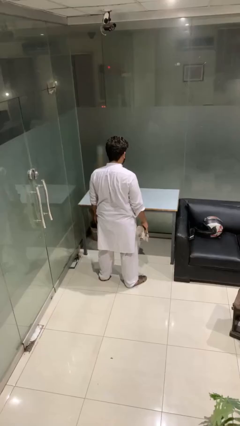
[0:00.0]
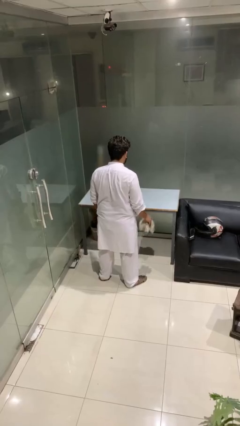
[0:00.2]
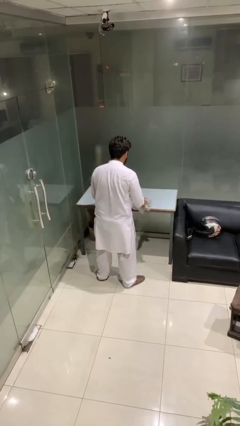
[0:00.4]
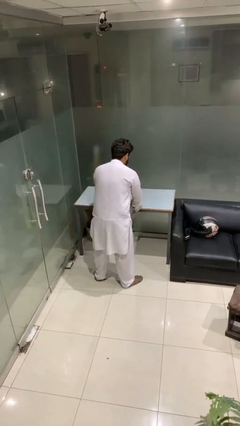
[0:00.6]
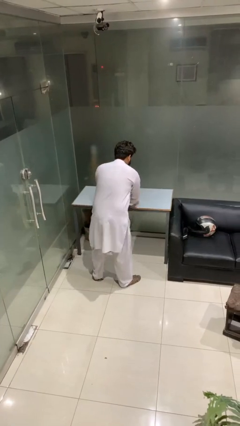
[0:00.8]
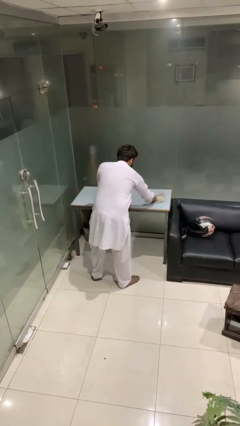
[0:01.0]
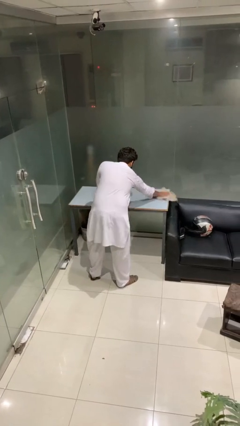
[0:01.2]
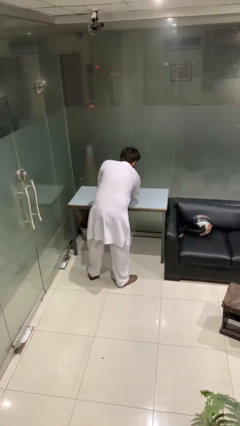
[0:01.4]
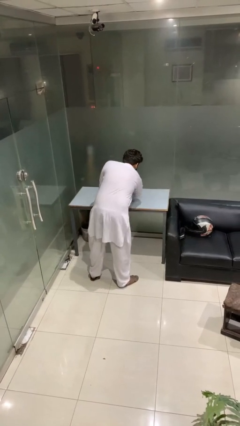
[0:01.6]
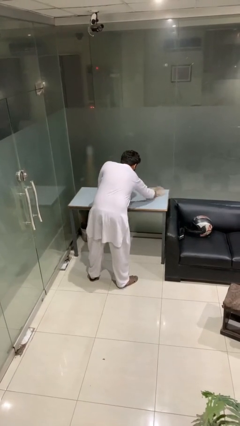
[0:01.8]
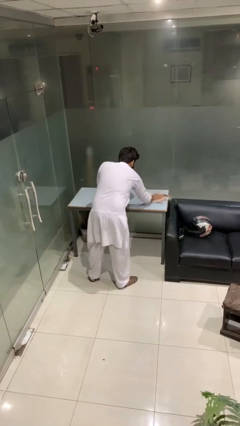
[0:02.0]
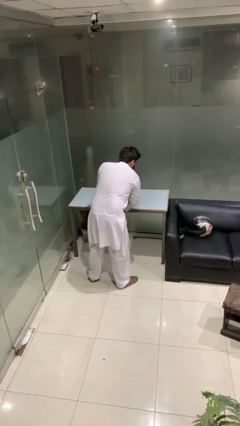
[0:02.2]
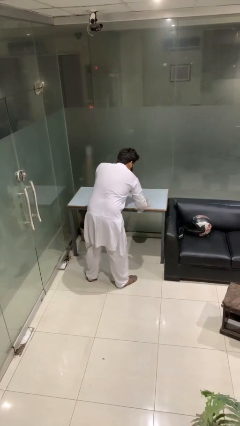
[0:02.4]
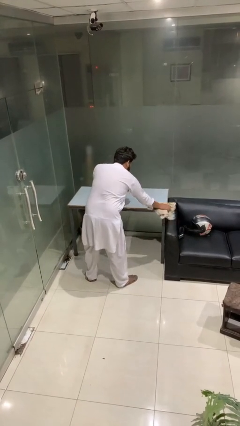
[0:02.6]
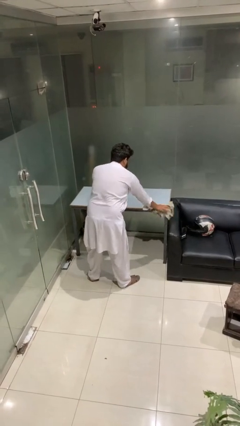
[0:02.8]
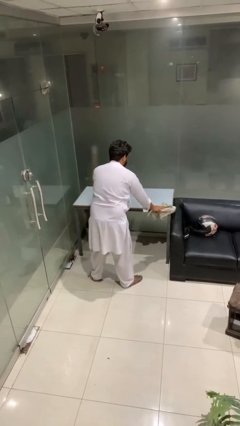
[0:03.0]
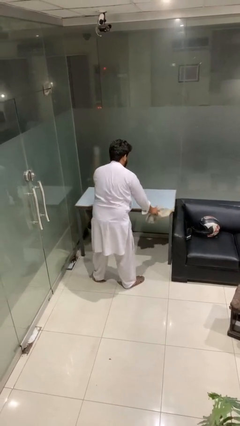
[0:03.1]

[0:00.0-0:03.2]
person cleans table with rag

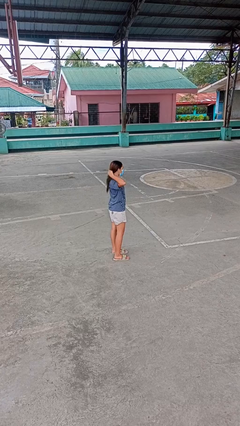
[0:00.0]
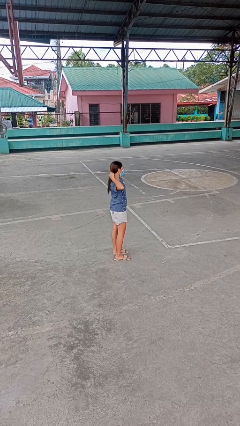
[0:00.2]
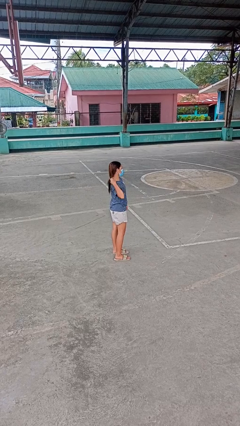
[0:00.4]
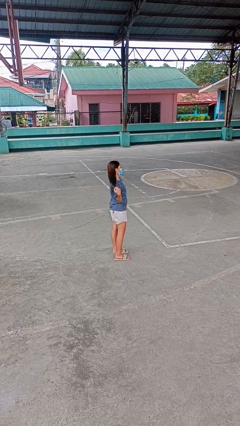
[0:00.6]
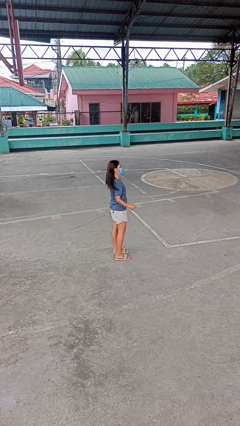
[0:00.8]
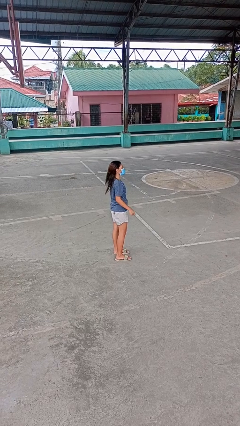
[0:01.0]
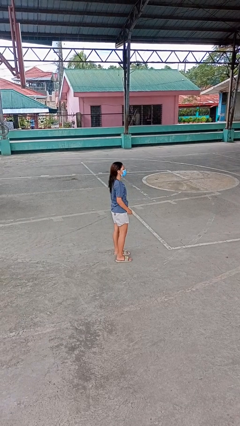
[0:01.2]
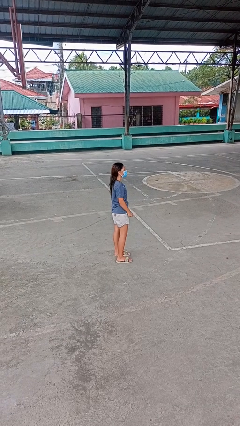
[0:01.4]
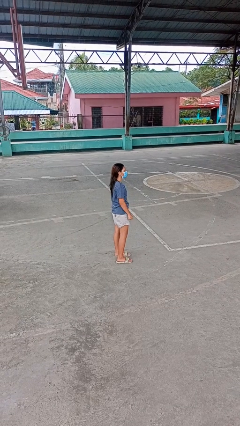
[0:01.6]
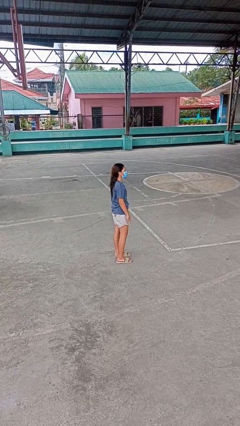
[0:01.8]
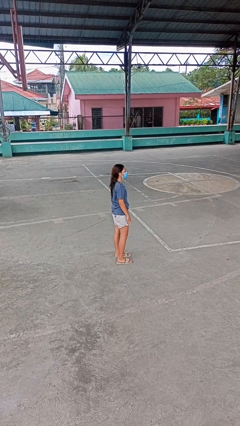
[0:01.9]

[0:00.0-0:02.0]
person takes off hairtie

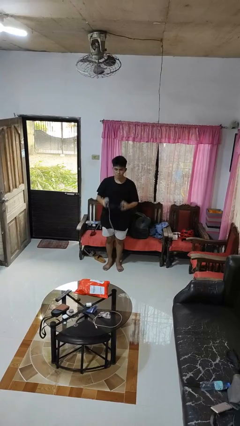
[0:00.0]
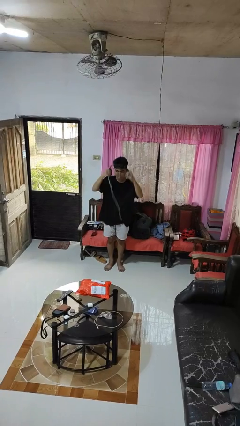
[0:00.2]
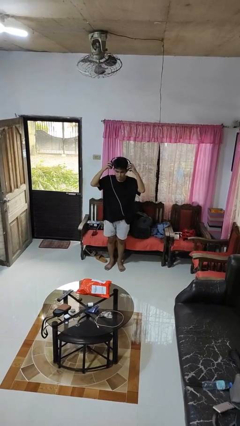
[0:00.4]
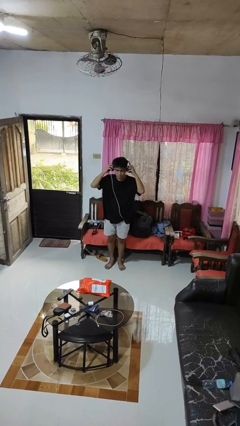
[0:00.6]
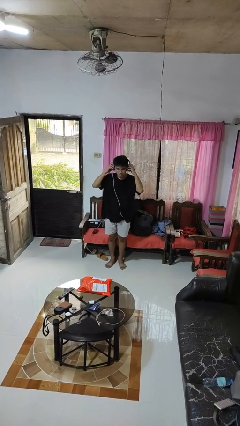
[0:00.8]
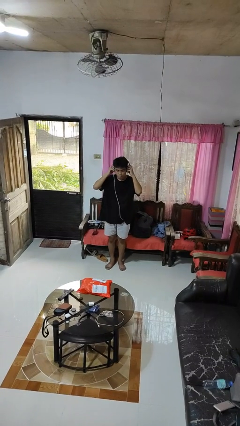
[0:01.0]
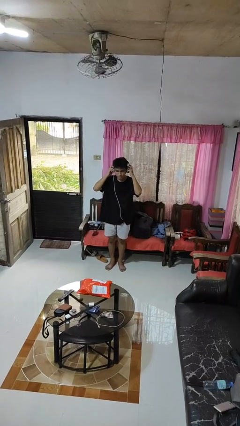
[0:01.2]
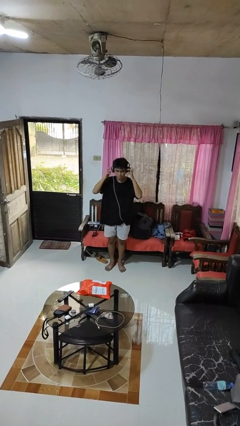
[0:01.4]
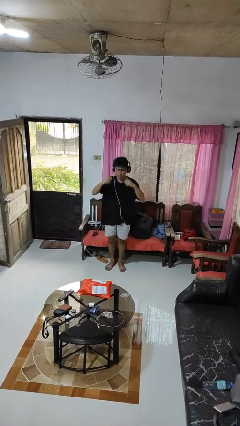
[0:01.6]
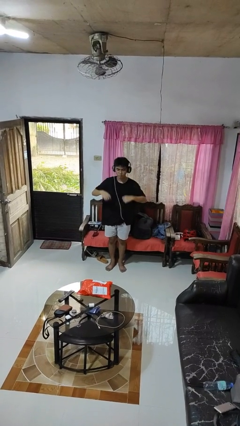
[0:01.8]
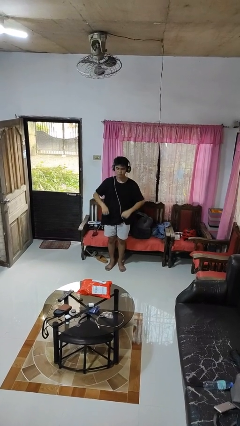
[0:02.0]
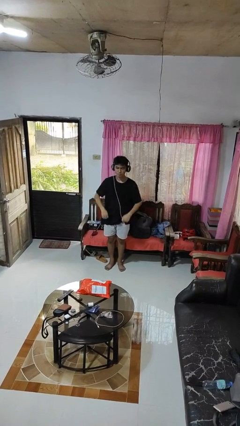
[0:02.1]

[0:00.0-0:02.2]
person puts on headphones

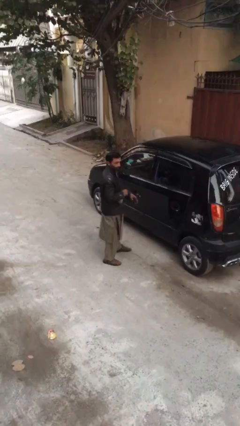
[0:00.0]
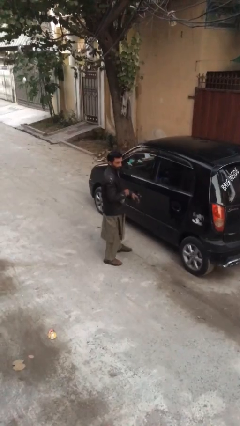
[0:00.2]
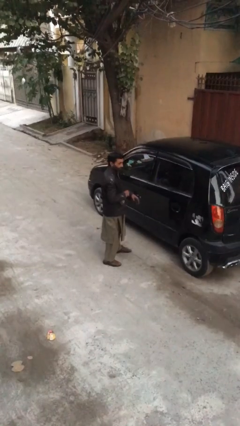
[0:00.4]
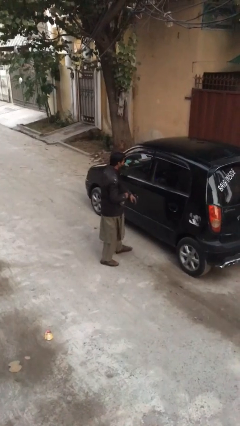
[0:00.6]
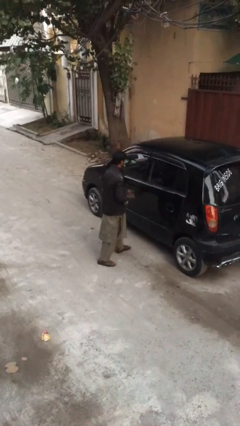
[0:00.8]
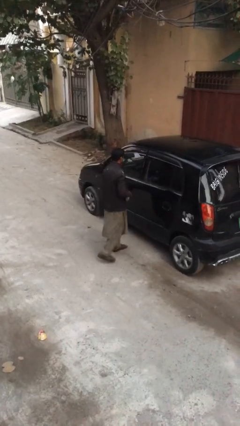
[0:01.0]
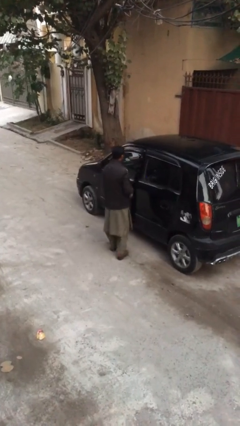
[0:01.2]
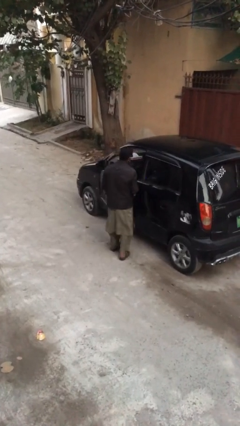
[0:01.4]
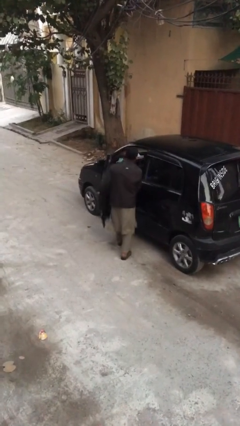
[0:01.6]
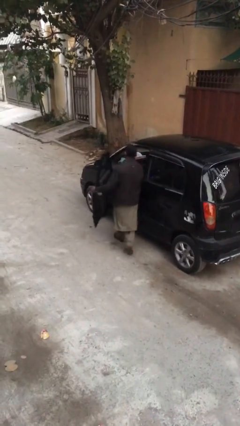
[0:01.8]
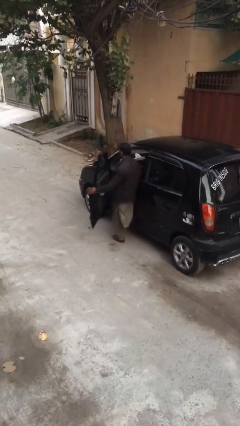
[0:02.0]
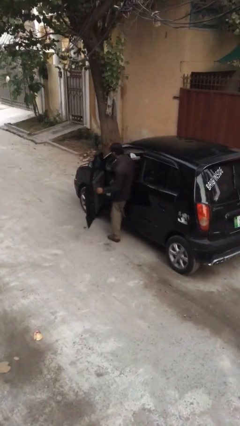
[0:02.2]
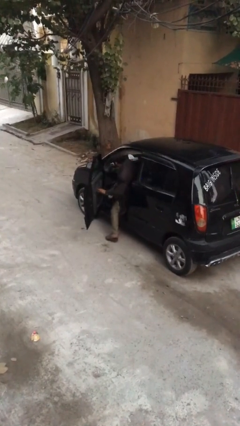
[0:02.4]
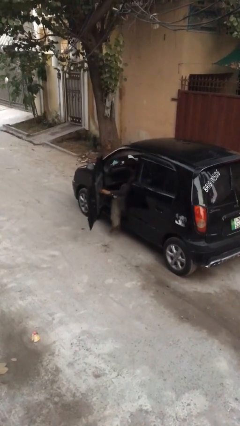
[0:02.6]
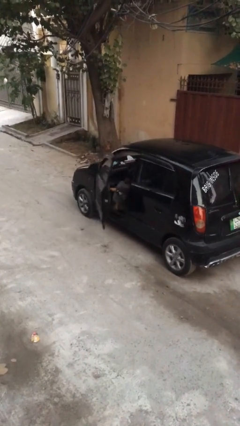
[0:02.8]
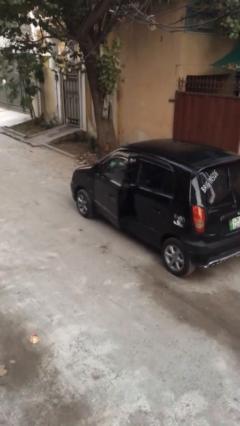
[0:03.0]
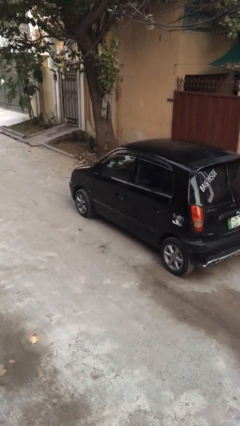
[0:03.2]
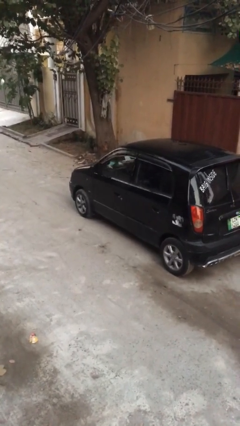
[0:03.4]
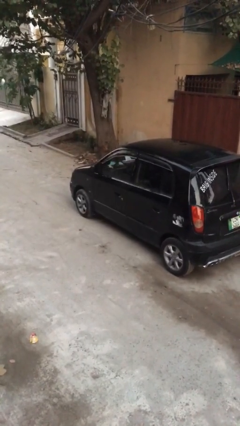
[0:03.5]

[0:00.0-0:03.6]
car picks up person

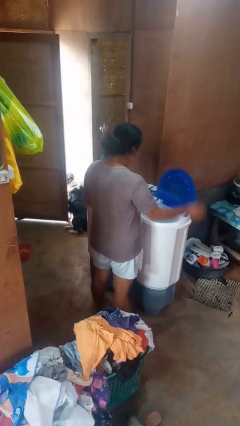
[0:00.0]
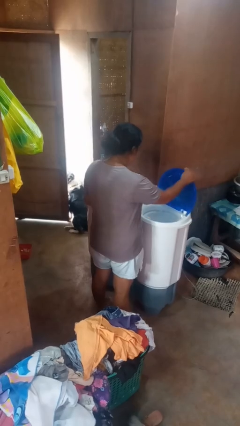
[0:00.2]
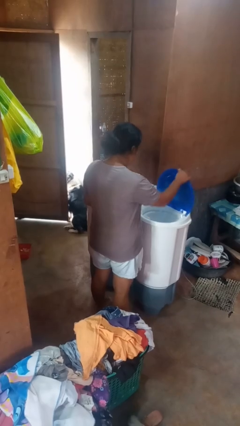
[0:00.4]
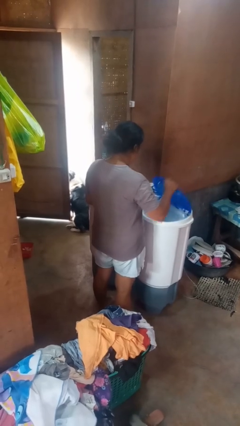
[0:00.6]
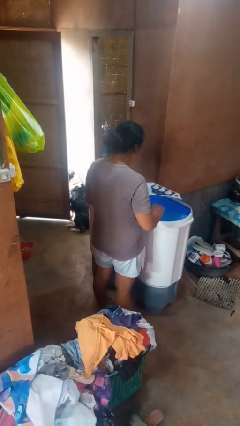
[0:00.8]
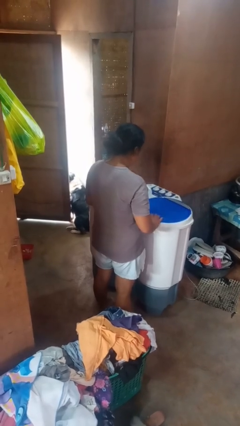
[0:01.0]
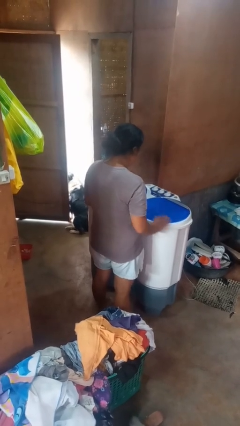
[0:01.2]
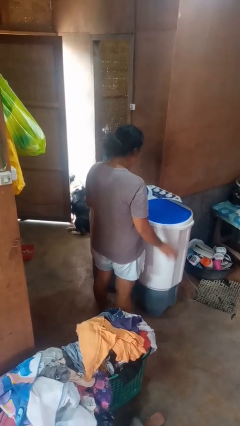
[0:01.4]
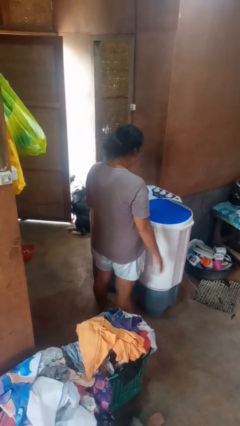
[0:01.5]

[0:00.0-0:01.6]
person closes clothes washer

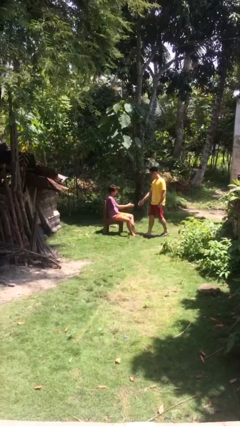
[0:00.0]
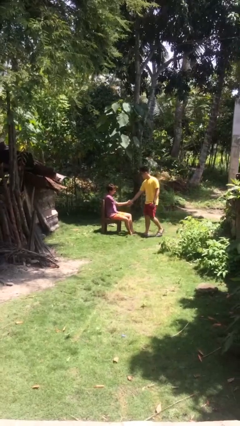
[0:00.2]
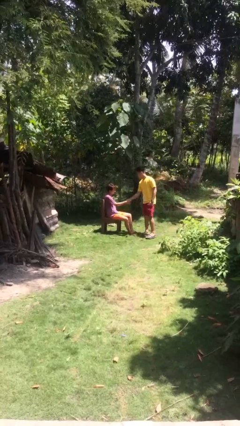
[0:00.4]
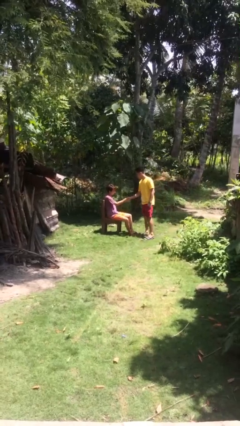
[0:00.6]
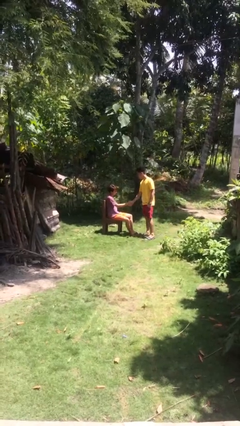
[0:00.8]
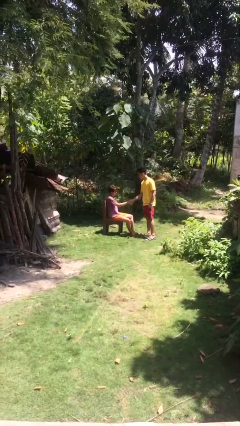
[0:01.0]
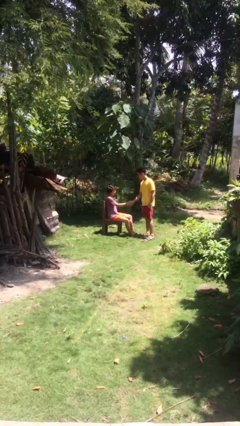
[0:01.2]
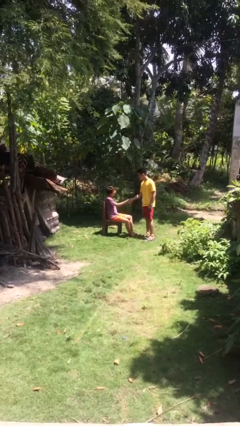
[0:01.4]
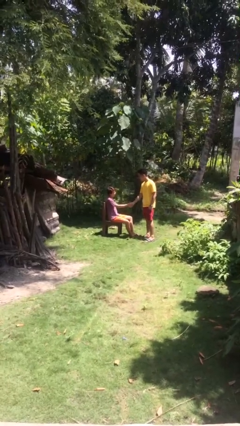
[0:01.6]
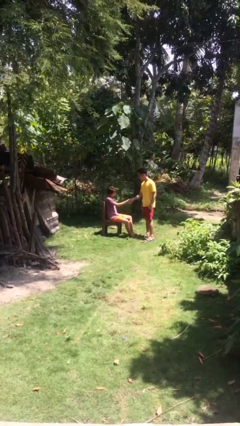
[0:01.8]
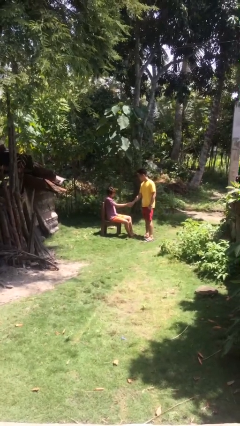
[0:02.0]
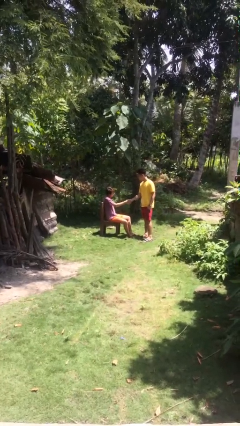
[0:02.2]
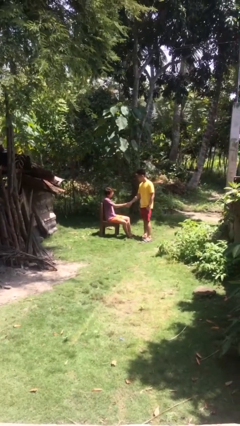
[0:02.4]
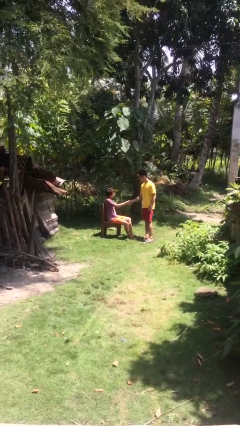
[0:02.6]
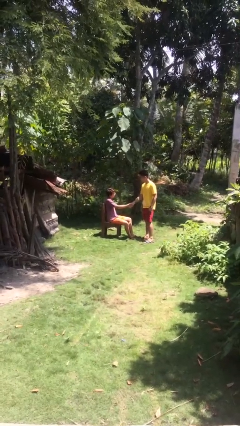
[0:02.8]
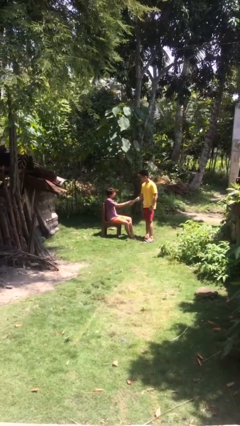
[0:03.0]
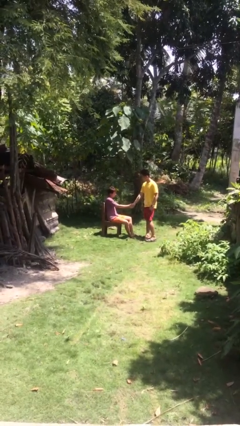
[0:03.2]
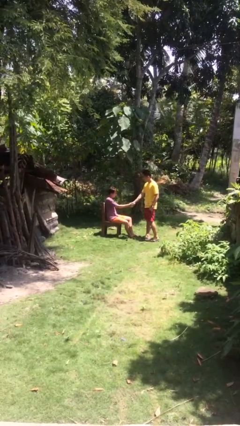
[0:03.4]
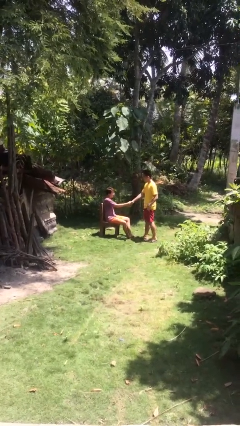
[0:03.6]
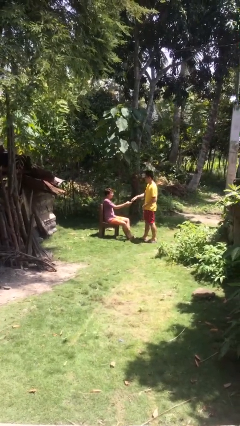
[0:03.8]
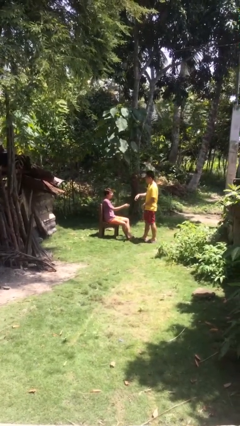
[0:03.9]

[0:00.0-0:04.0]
person shakes hand

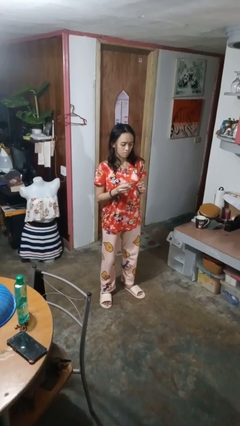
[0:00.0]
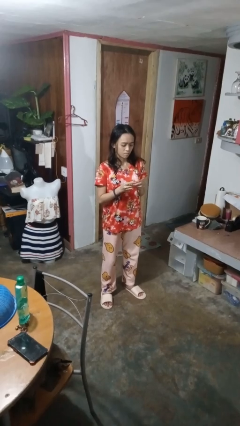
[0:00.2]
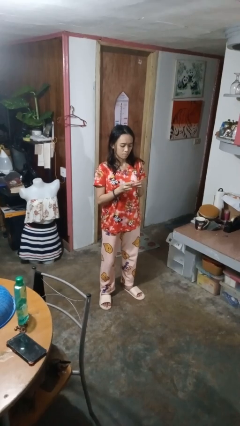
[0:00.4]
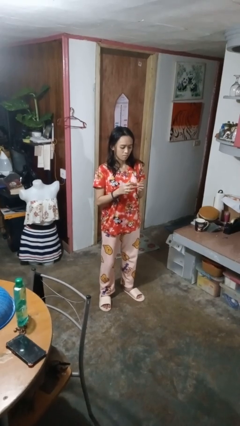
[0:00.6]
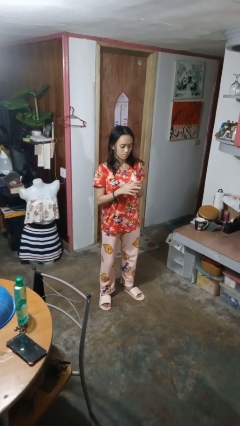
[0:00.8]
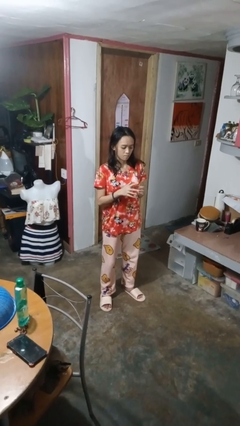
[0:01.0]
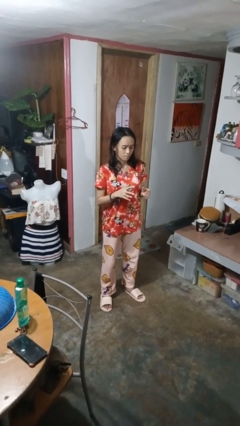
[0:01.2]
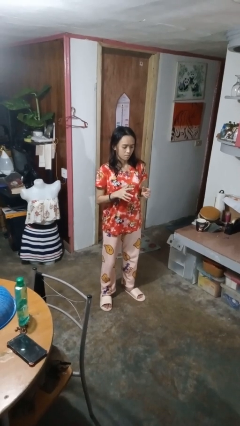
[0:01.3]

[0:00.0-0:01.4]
person puts on ring
